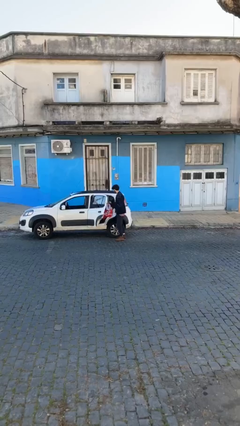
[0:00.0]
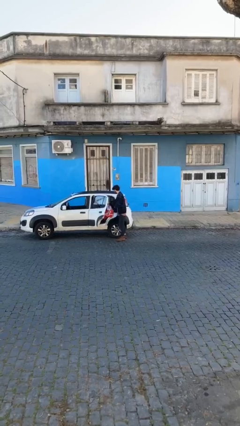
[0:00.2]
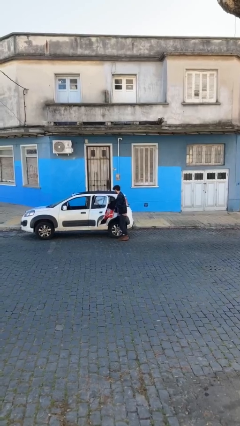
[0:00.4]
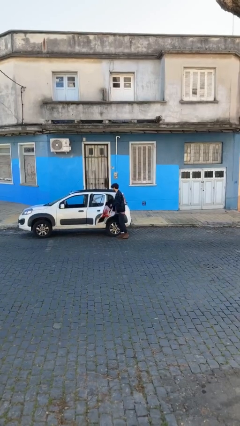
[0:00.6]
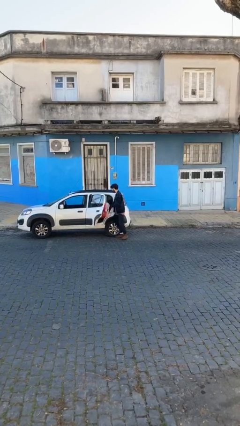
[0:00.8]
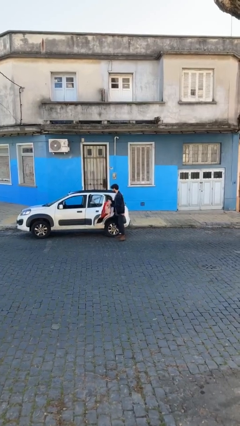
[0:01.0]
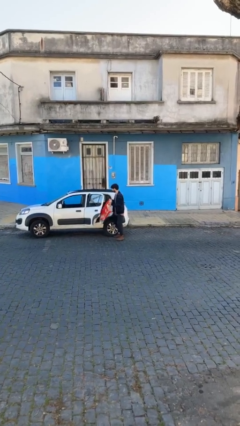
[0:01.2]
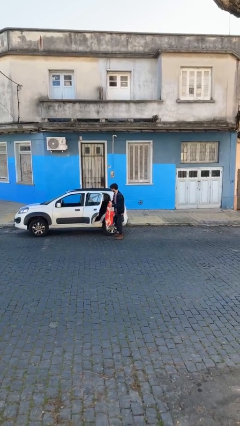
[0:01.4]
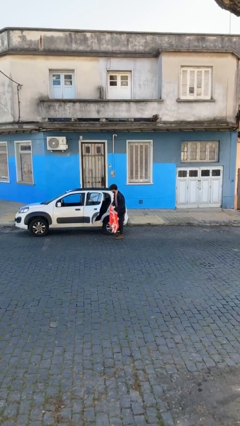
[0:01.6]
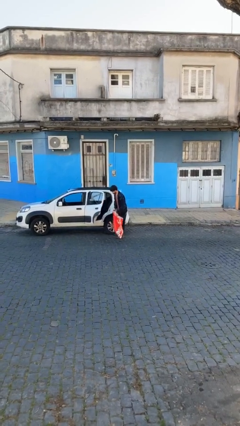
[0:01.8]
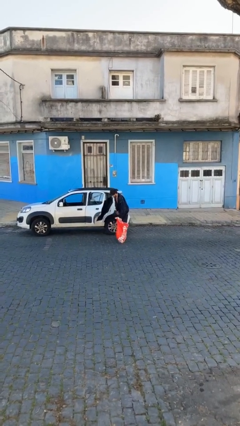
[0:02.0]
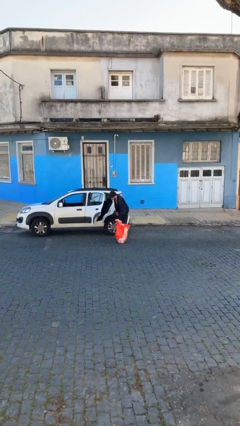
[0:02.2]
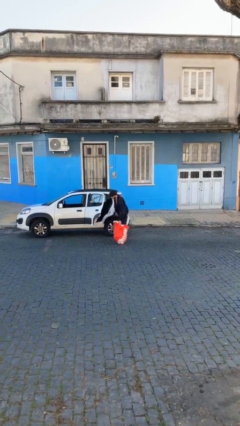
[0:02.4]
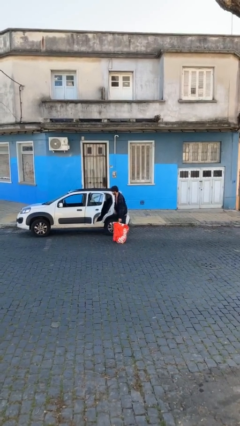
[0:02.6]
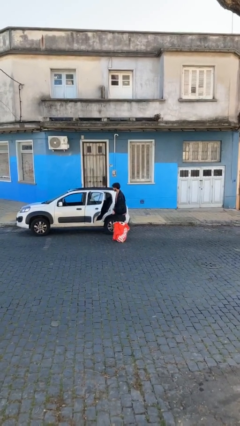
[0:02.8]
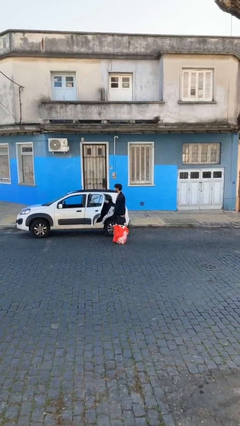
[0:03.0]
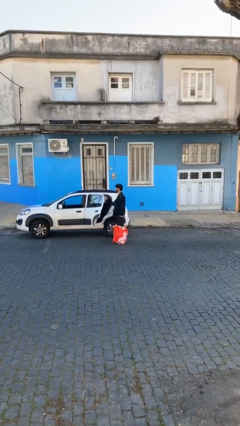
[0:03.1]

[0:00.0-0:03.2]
person unloads car

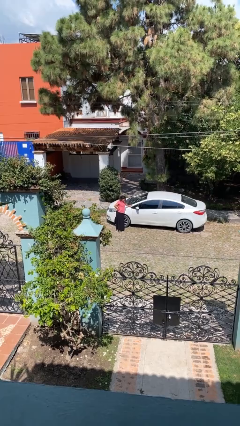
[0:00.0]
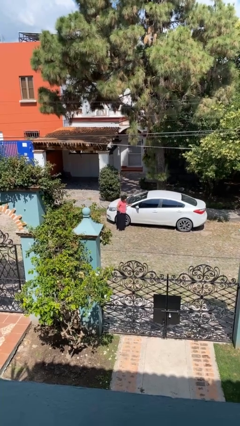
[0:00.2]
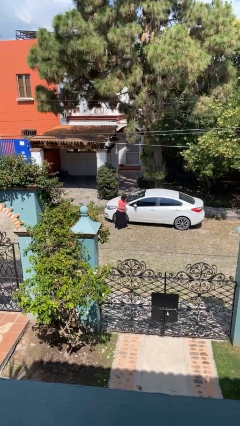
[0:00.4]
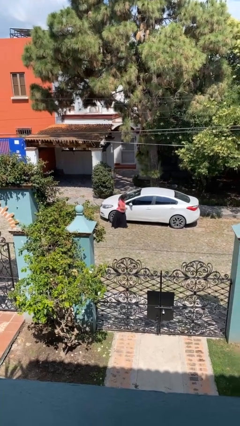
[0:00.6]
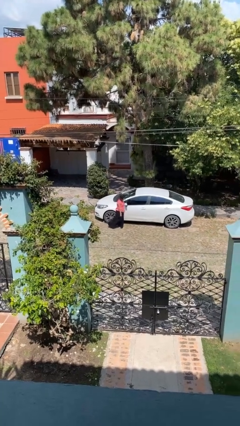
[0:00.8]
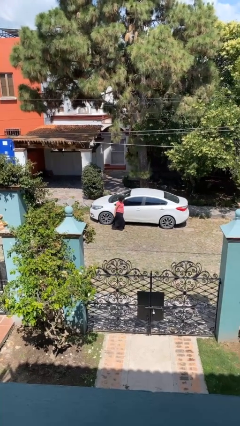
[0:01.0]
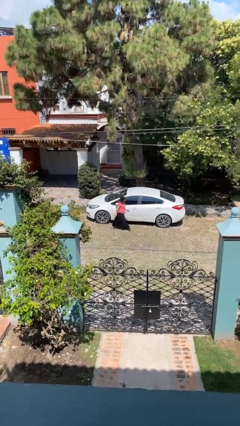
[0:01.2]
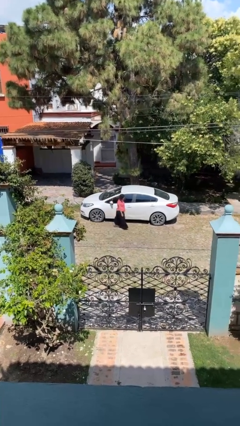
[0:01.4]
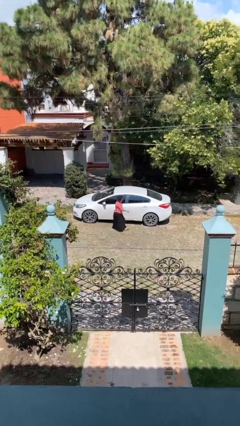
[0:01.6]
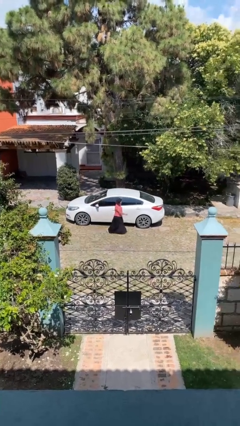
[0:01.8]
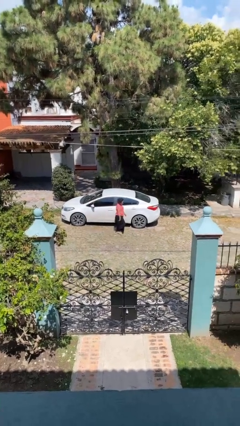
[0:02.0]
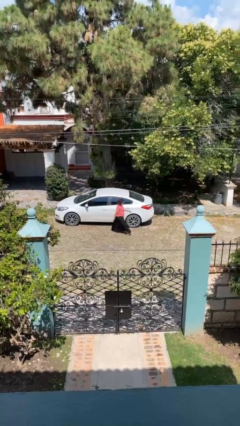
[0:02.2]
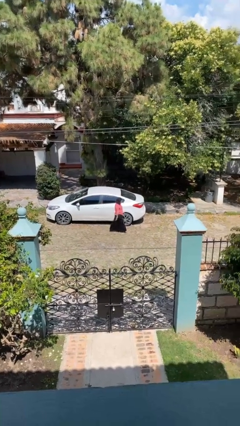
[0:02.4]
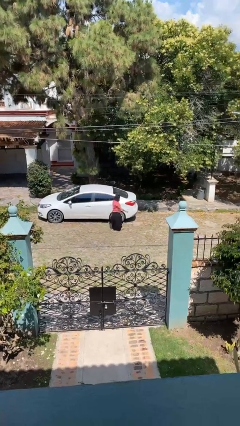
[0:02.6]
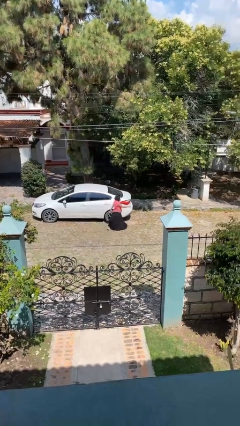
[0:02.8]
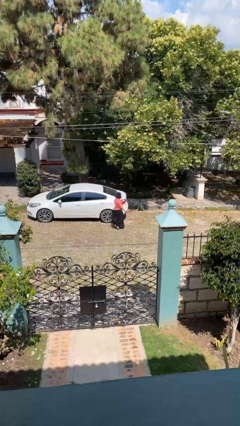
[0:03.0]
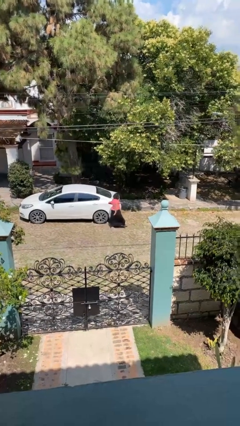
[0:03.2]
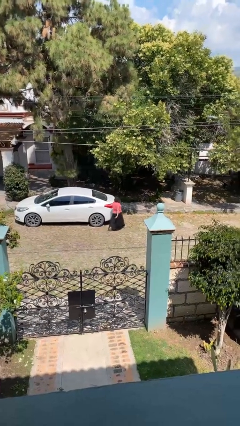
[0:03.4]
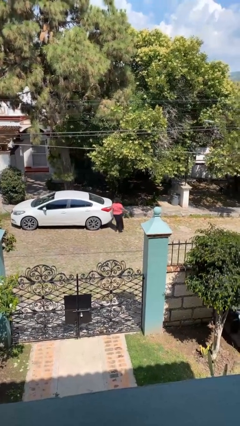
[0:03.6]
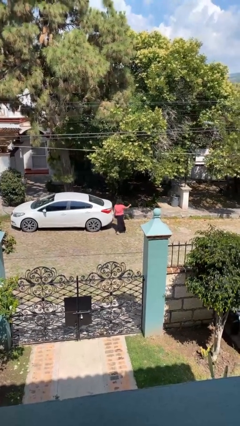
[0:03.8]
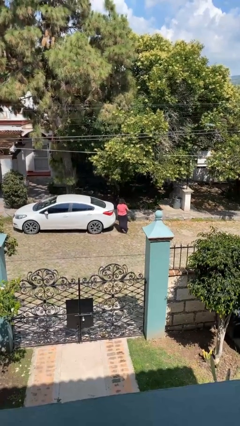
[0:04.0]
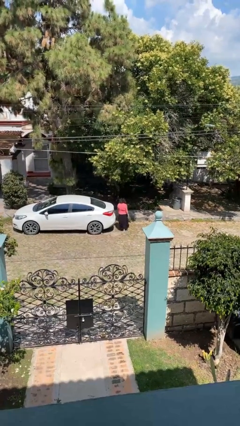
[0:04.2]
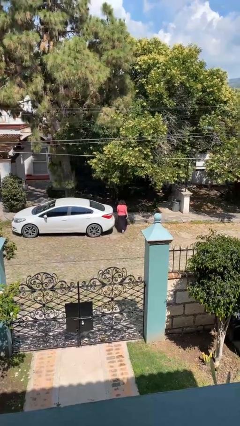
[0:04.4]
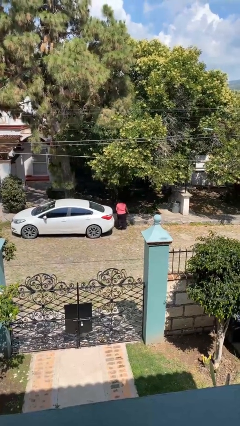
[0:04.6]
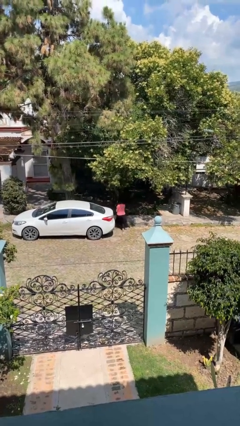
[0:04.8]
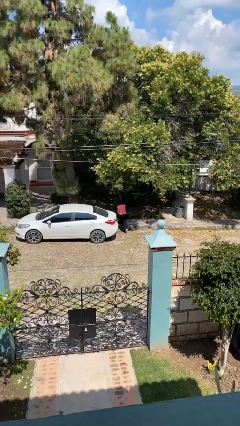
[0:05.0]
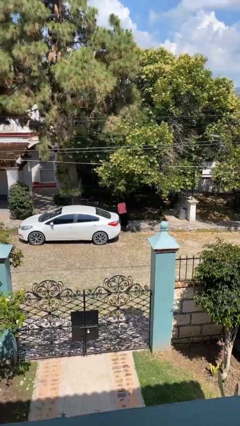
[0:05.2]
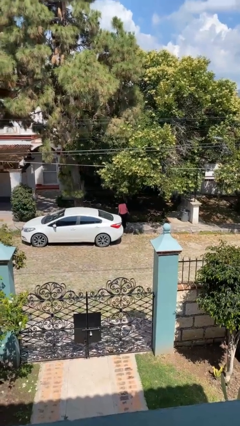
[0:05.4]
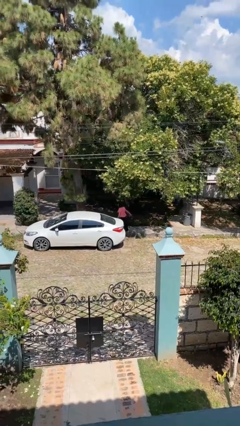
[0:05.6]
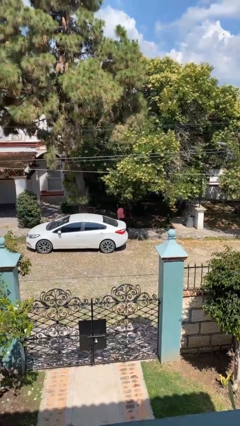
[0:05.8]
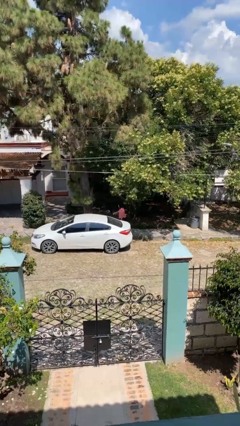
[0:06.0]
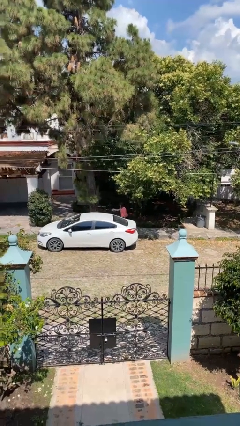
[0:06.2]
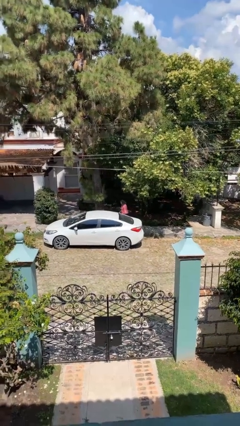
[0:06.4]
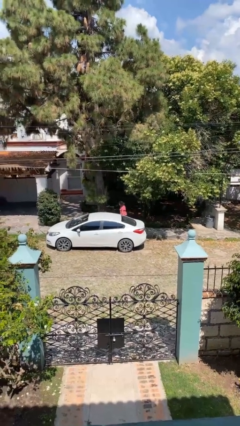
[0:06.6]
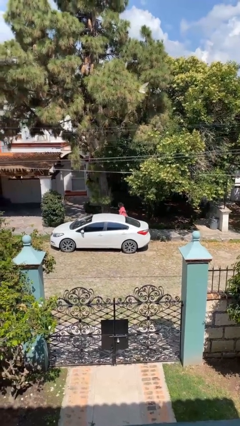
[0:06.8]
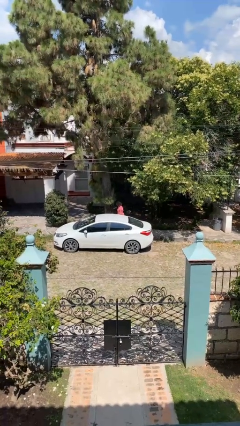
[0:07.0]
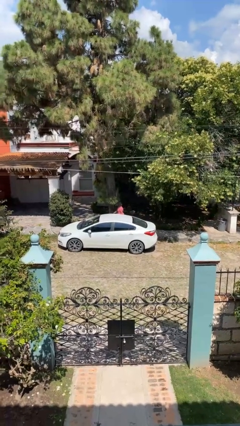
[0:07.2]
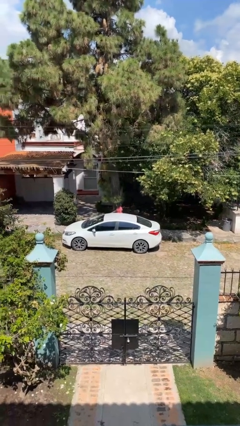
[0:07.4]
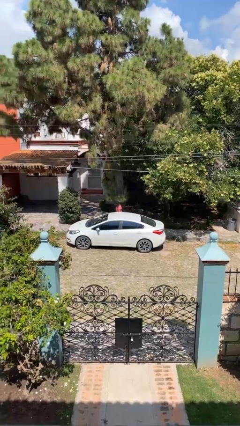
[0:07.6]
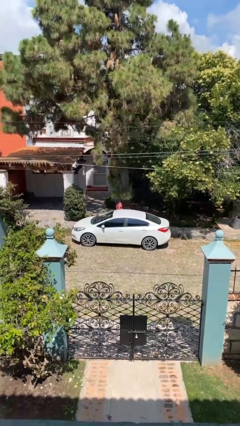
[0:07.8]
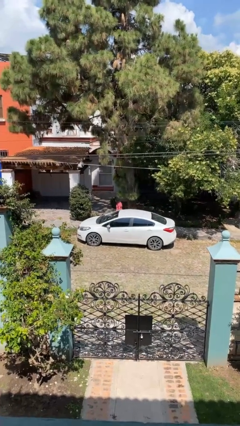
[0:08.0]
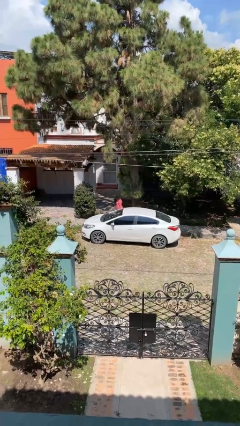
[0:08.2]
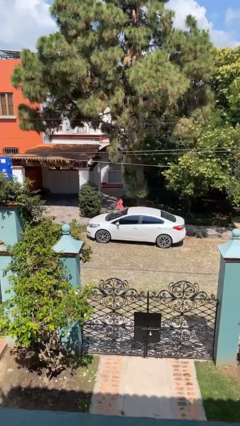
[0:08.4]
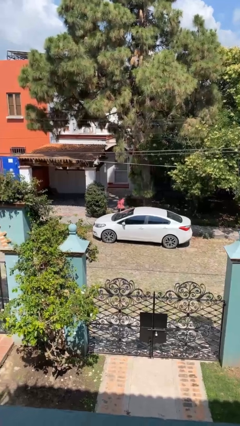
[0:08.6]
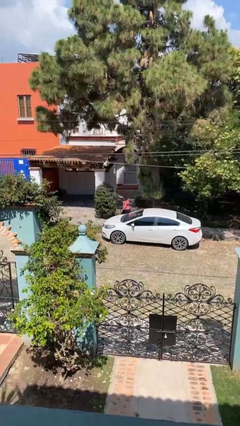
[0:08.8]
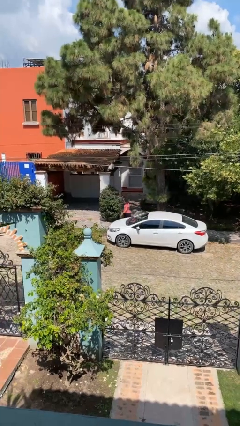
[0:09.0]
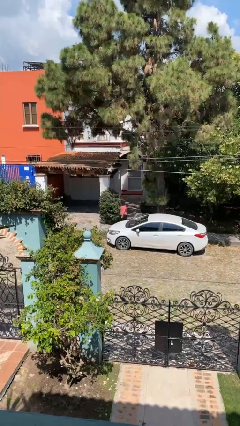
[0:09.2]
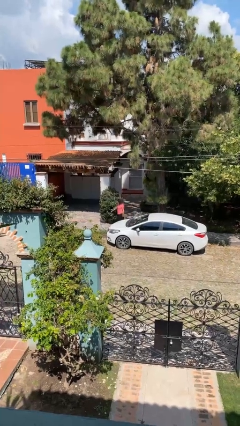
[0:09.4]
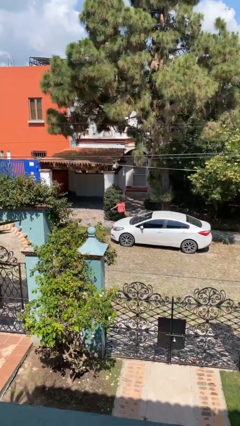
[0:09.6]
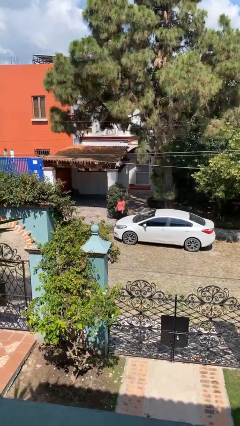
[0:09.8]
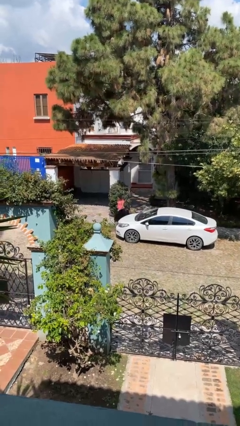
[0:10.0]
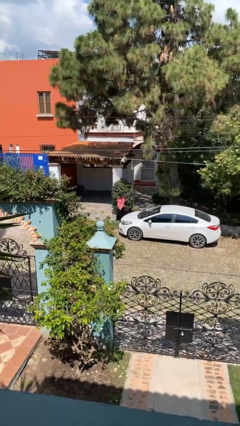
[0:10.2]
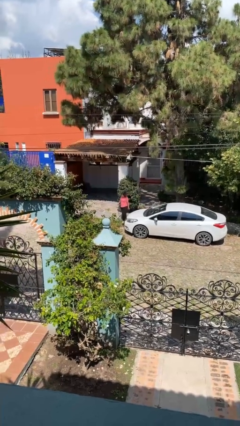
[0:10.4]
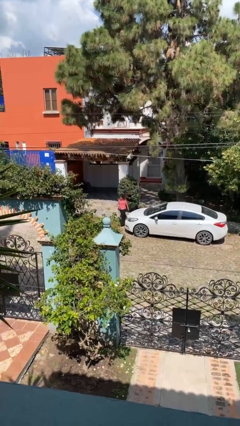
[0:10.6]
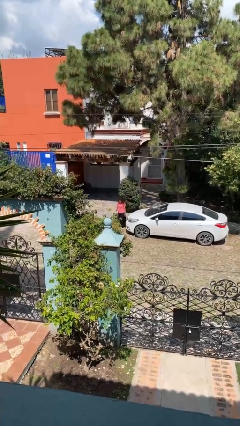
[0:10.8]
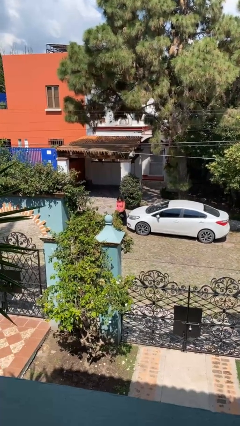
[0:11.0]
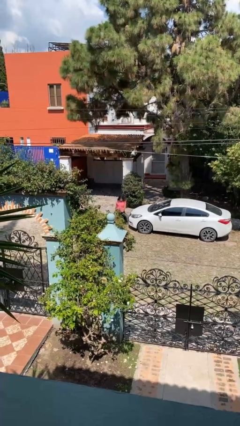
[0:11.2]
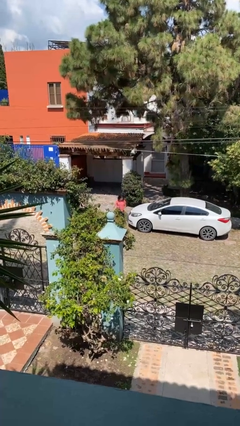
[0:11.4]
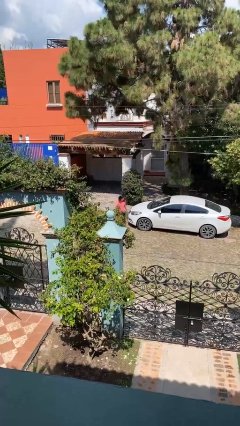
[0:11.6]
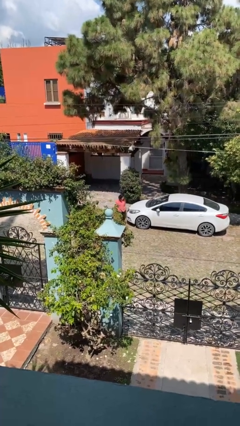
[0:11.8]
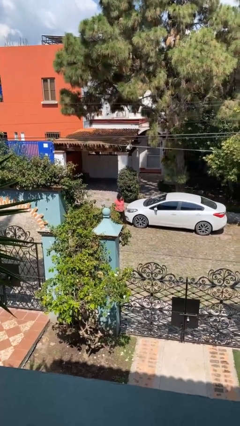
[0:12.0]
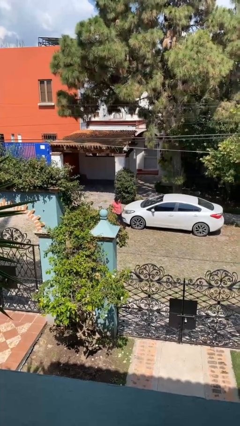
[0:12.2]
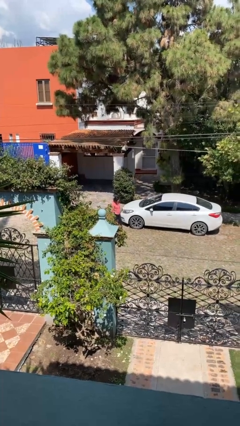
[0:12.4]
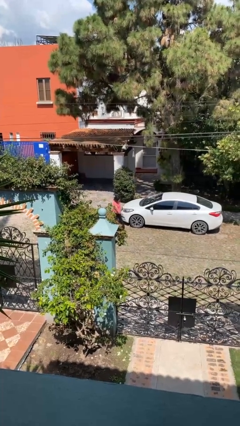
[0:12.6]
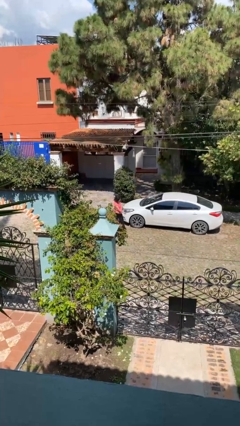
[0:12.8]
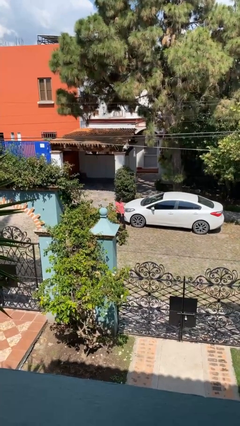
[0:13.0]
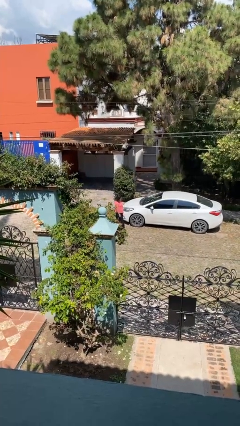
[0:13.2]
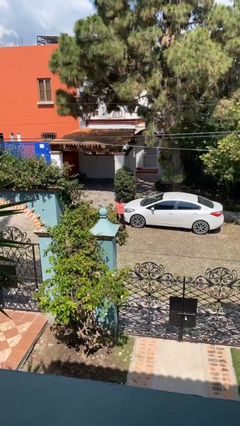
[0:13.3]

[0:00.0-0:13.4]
person walks around car

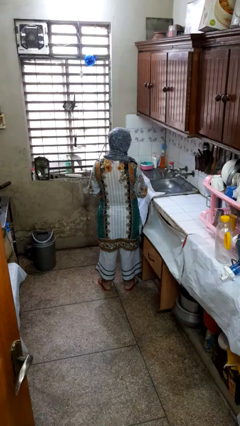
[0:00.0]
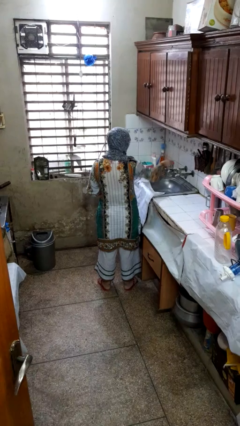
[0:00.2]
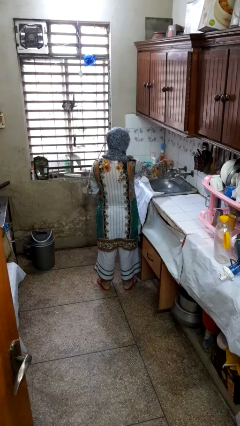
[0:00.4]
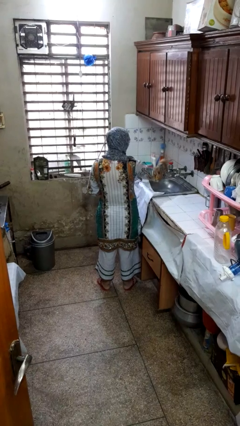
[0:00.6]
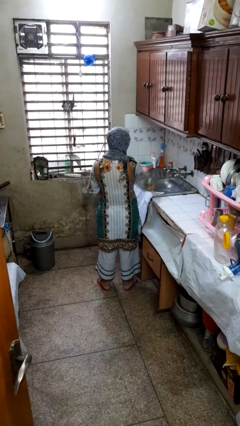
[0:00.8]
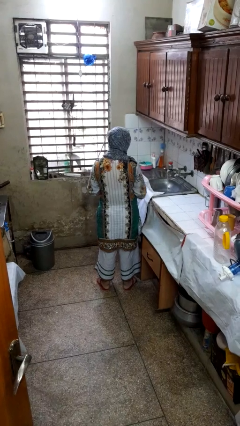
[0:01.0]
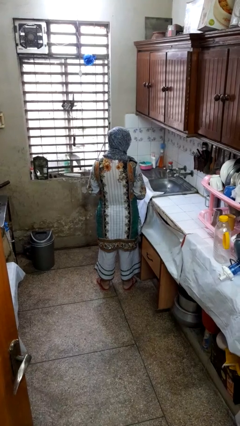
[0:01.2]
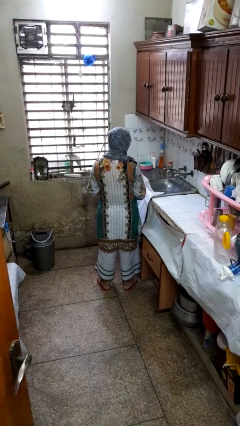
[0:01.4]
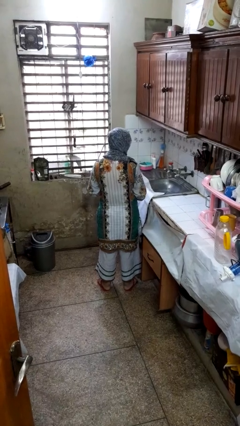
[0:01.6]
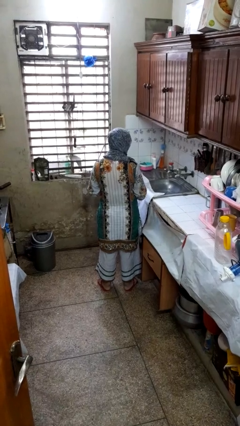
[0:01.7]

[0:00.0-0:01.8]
person turns on faucet
